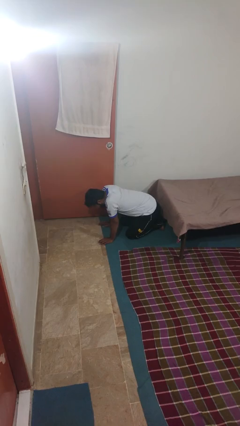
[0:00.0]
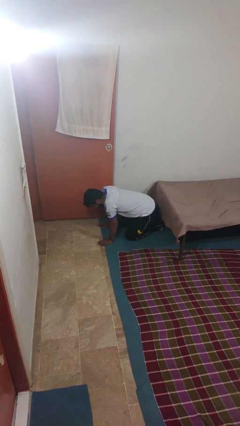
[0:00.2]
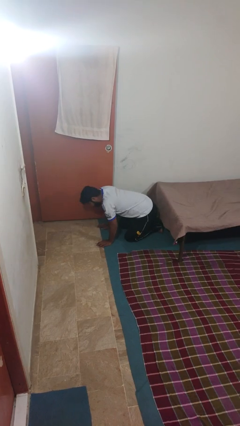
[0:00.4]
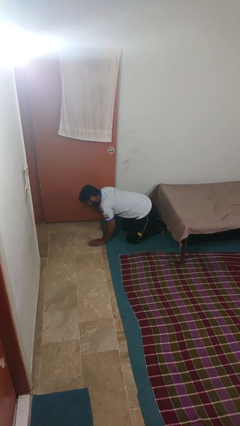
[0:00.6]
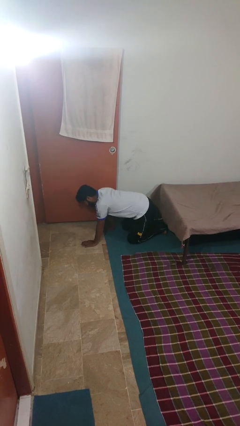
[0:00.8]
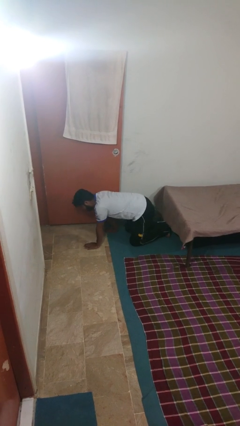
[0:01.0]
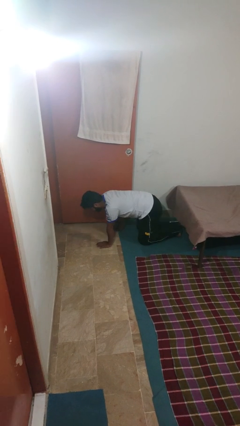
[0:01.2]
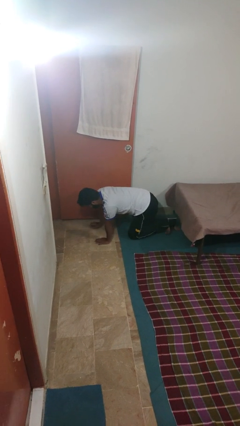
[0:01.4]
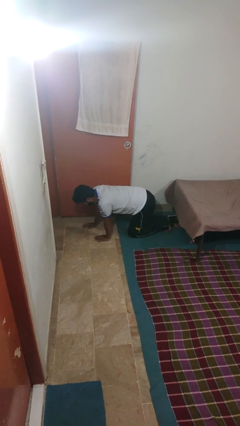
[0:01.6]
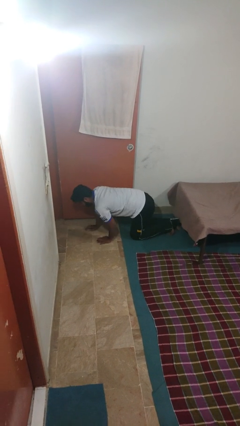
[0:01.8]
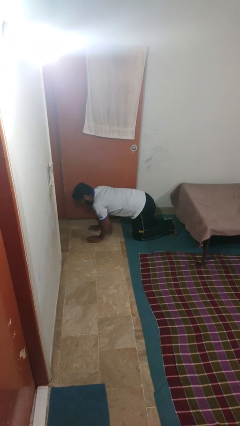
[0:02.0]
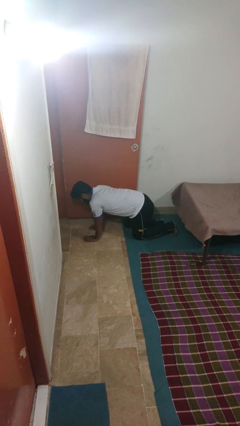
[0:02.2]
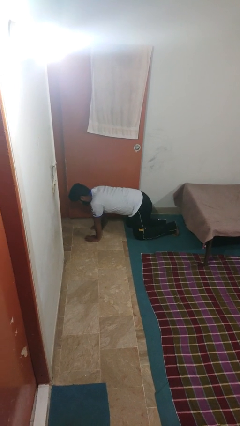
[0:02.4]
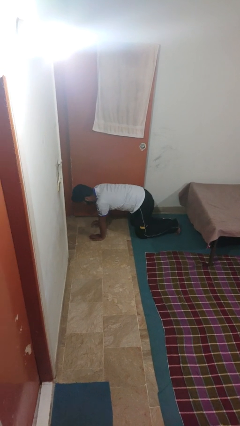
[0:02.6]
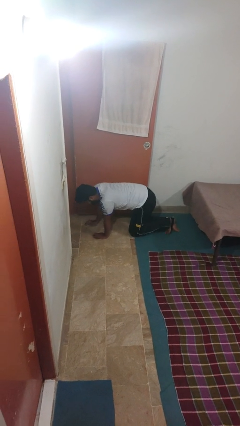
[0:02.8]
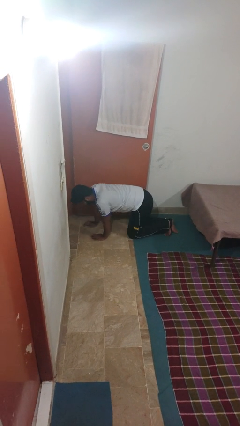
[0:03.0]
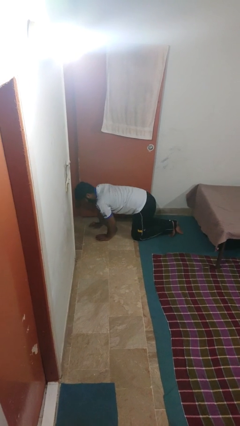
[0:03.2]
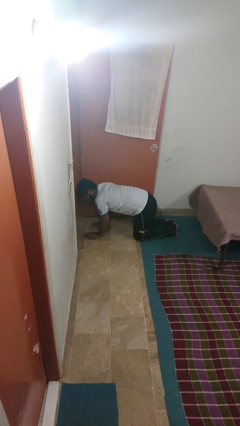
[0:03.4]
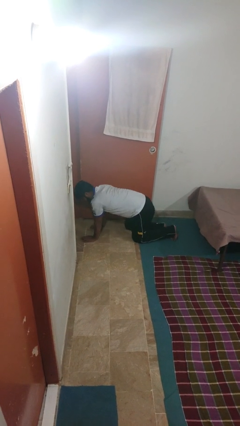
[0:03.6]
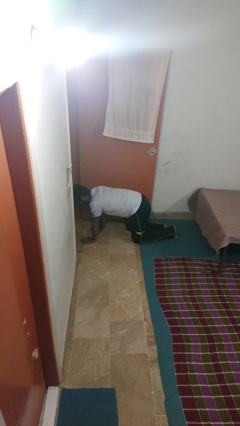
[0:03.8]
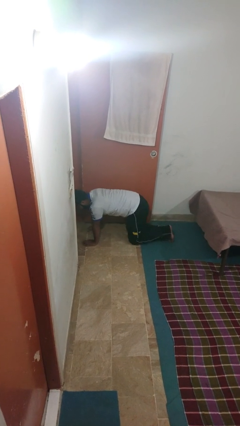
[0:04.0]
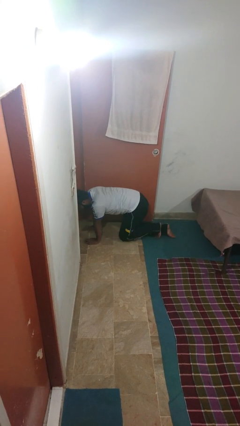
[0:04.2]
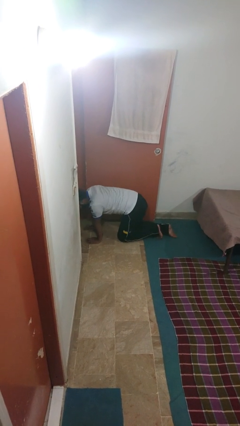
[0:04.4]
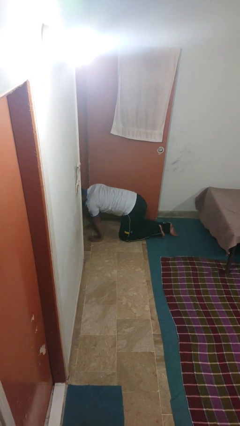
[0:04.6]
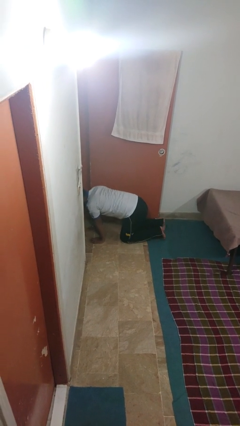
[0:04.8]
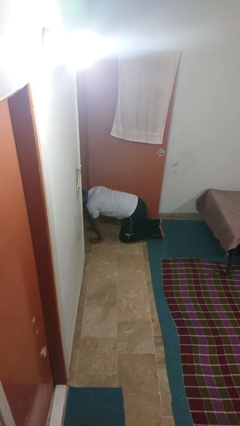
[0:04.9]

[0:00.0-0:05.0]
person crawls

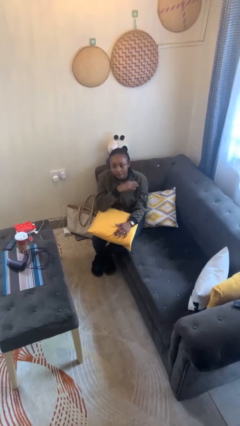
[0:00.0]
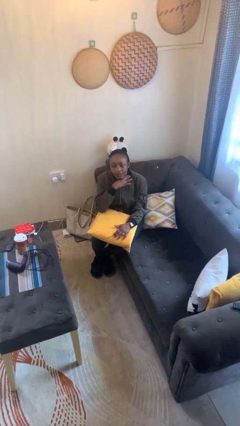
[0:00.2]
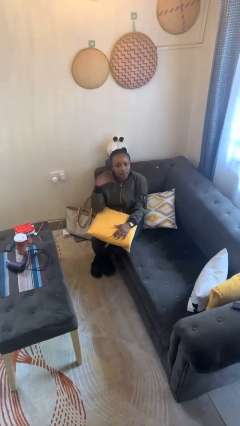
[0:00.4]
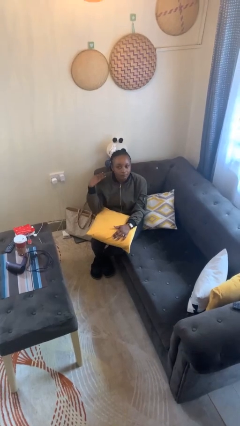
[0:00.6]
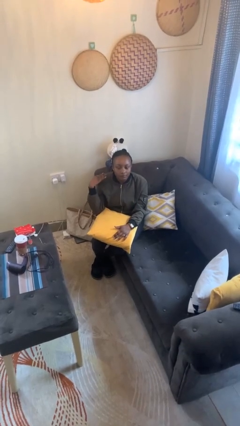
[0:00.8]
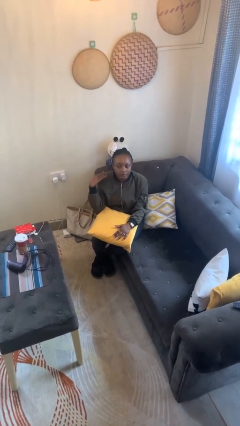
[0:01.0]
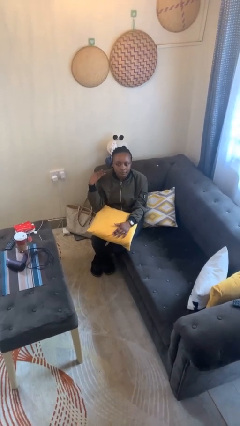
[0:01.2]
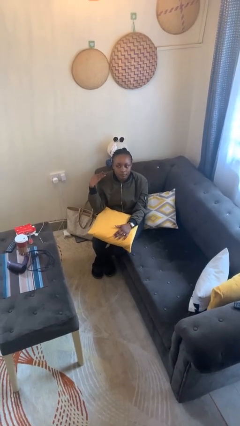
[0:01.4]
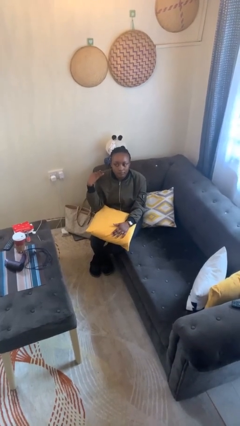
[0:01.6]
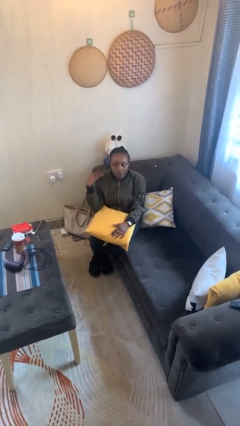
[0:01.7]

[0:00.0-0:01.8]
person gestures cut

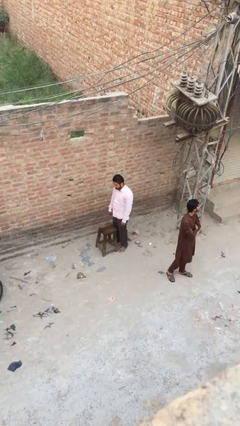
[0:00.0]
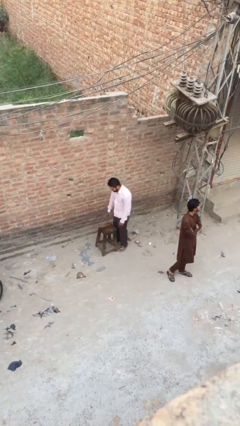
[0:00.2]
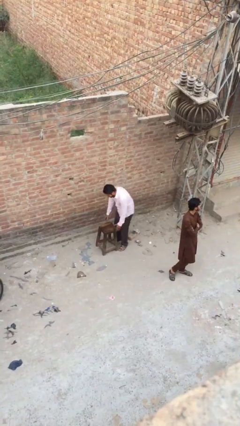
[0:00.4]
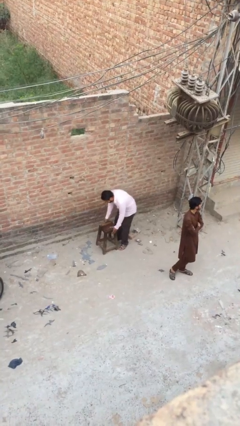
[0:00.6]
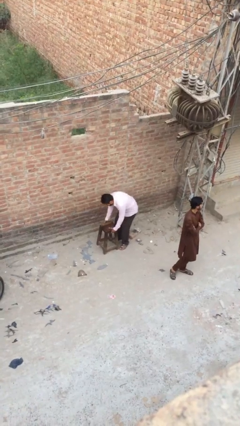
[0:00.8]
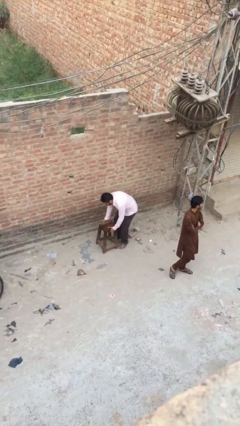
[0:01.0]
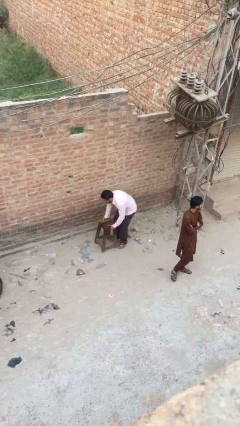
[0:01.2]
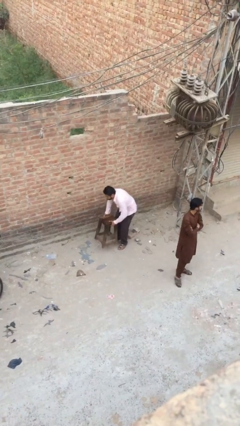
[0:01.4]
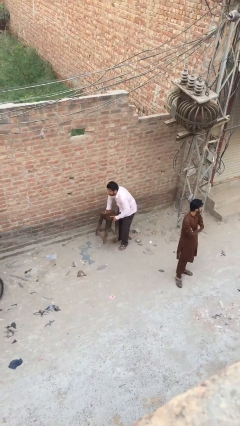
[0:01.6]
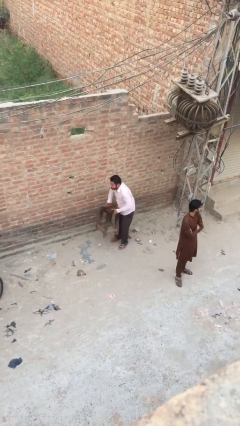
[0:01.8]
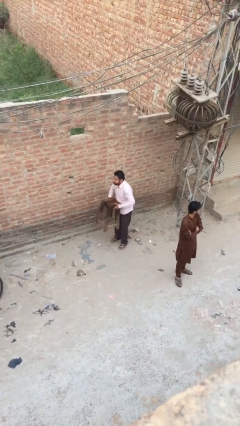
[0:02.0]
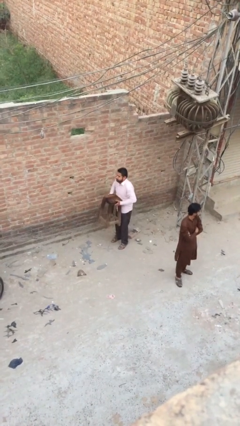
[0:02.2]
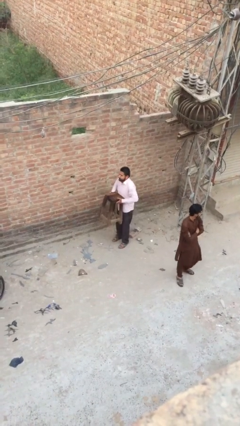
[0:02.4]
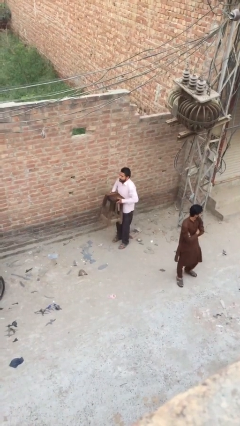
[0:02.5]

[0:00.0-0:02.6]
person picks up object from floor

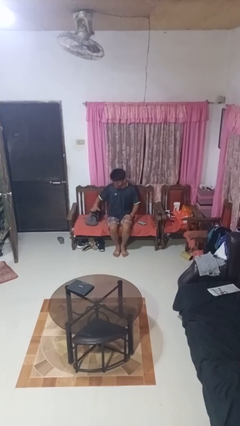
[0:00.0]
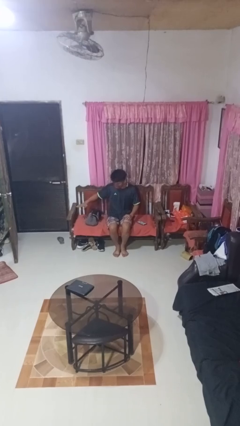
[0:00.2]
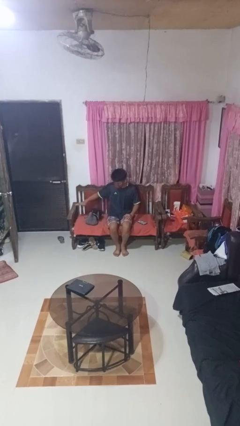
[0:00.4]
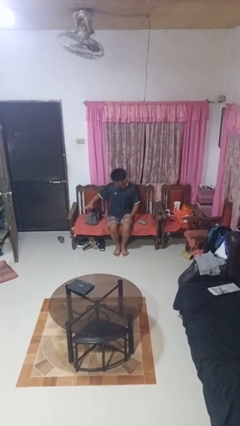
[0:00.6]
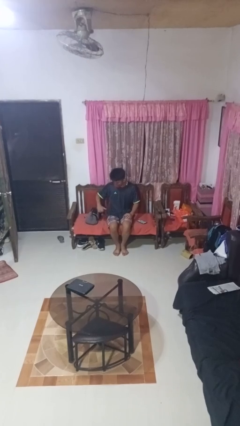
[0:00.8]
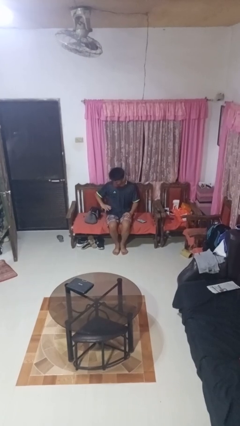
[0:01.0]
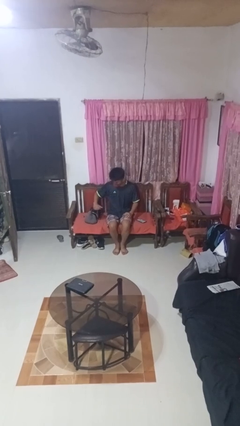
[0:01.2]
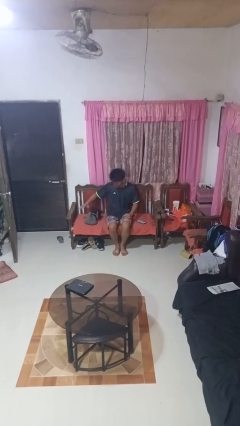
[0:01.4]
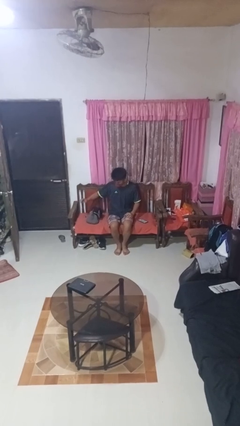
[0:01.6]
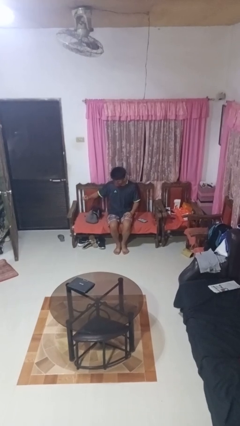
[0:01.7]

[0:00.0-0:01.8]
person waves hand over object

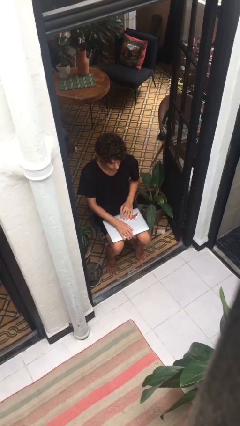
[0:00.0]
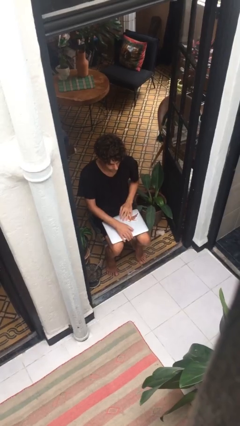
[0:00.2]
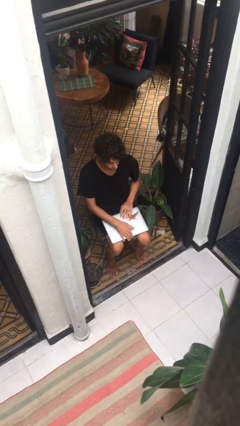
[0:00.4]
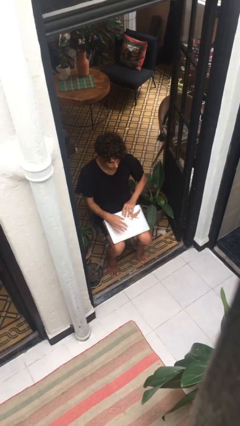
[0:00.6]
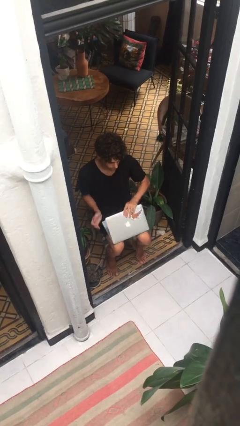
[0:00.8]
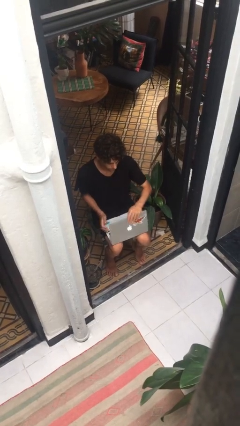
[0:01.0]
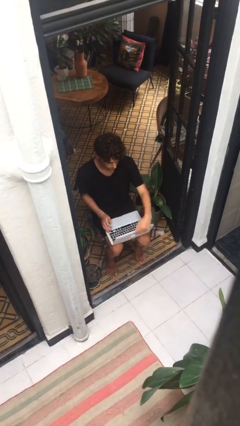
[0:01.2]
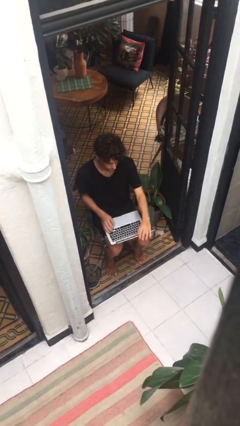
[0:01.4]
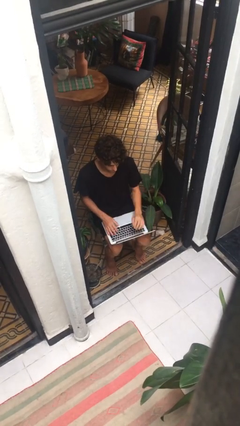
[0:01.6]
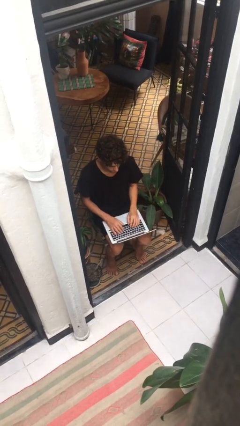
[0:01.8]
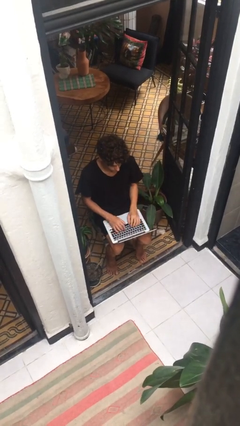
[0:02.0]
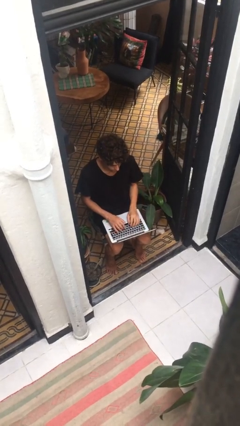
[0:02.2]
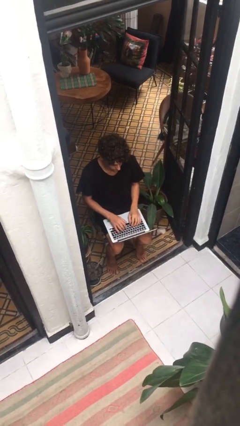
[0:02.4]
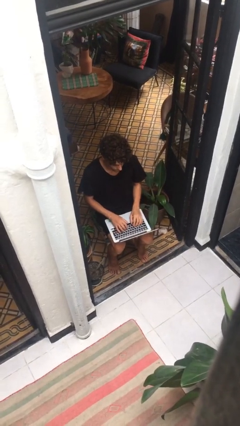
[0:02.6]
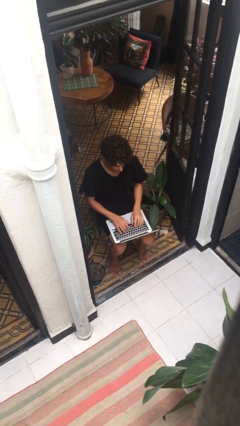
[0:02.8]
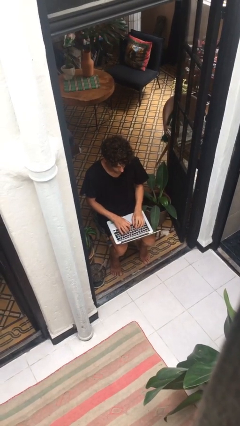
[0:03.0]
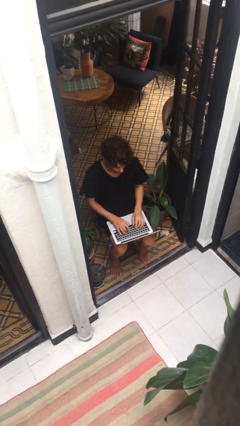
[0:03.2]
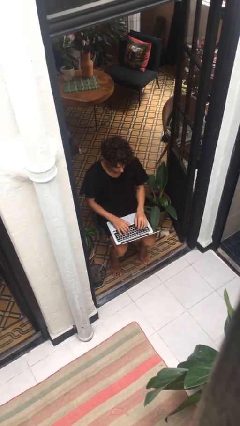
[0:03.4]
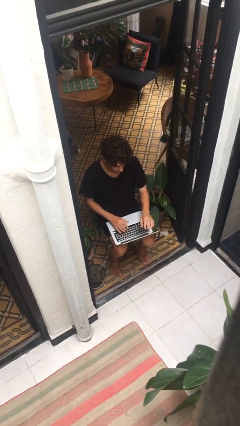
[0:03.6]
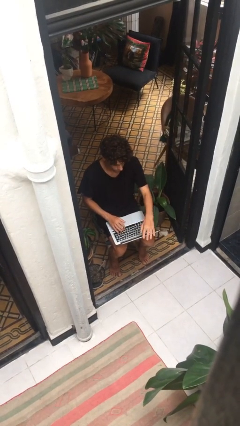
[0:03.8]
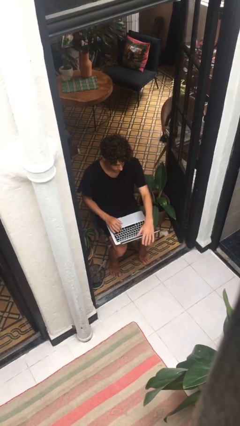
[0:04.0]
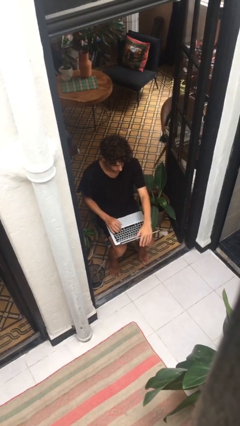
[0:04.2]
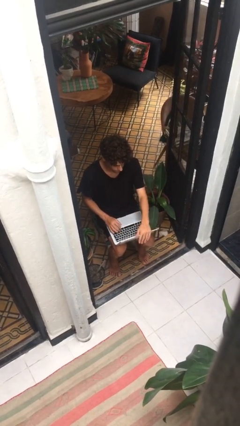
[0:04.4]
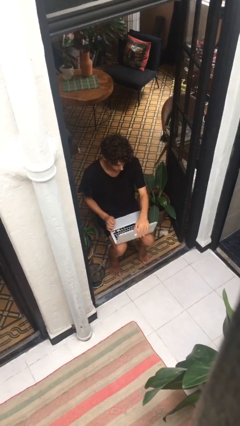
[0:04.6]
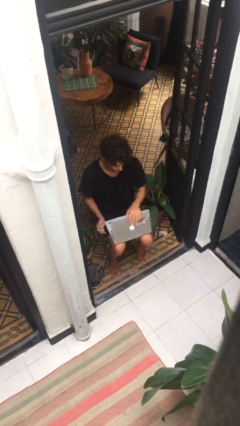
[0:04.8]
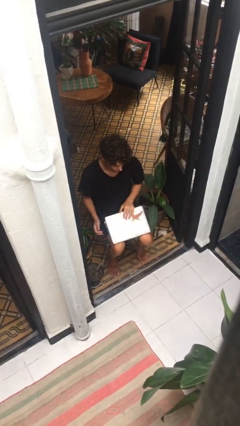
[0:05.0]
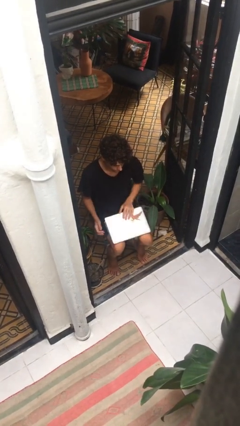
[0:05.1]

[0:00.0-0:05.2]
person interacts with laptop

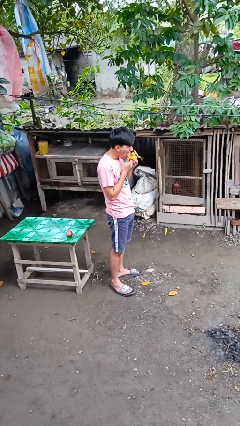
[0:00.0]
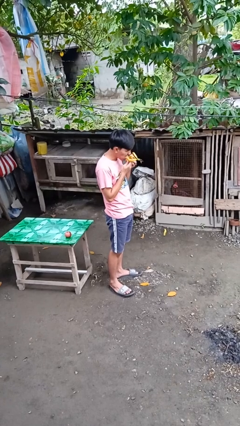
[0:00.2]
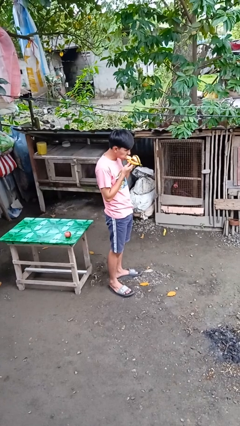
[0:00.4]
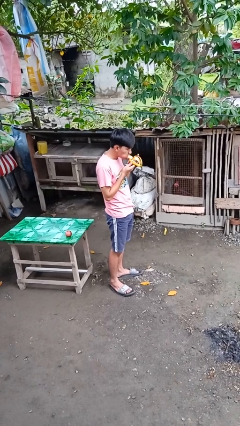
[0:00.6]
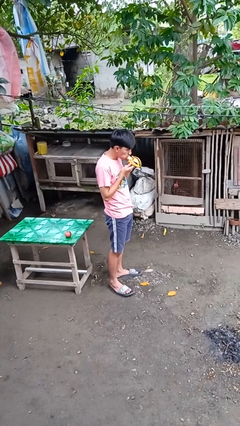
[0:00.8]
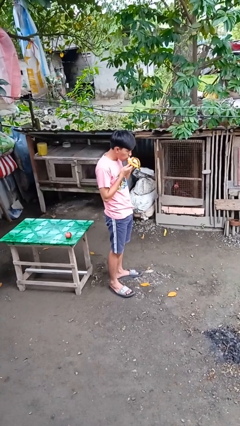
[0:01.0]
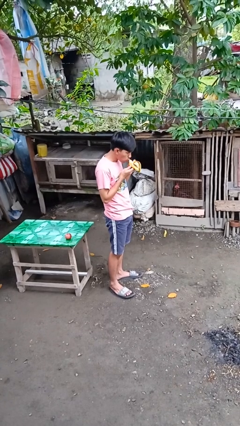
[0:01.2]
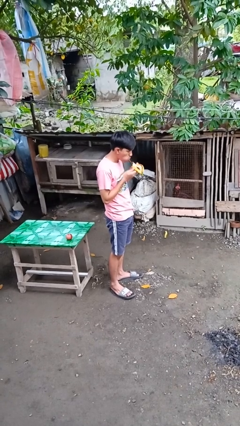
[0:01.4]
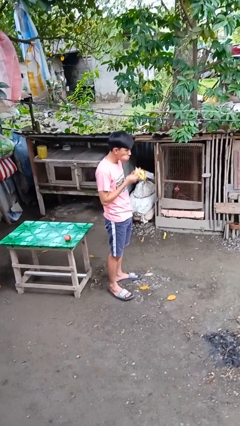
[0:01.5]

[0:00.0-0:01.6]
person eats banana
